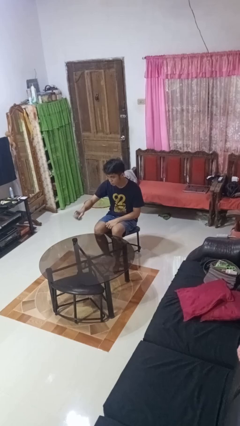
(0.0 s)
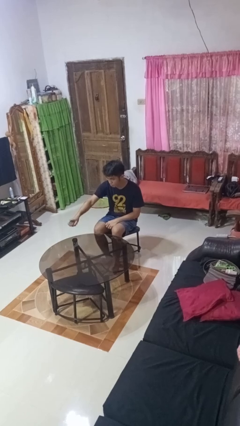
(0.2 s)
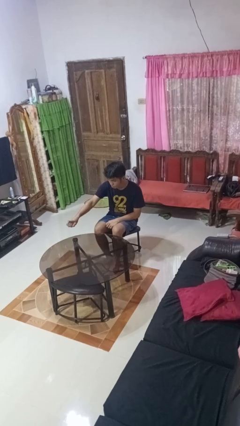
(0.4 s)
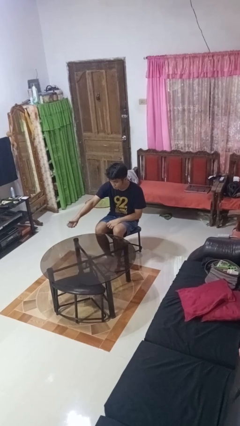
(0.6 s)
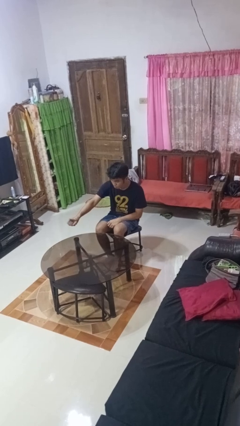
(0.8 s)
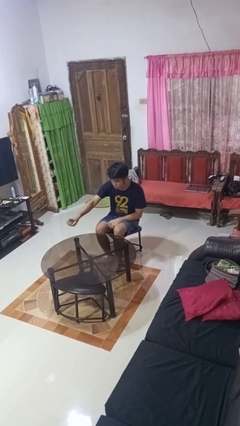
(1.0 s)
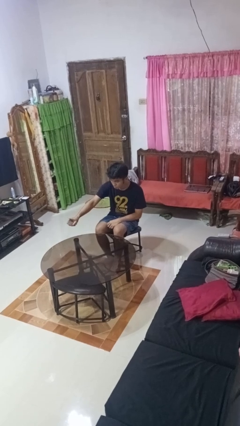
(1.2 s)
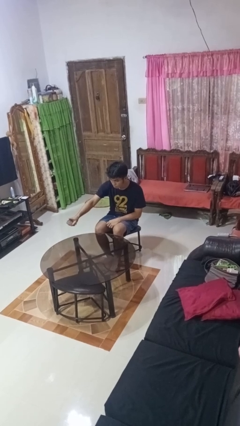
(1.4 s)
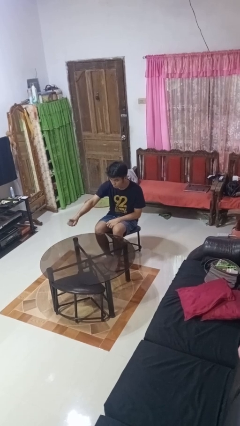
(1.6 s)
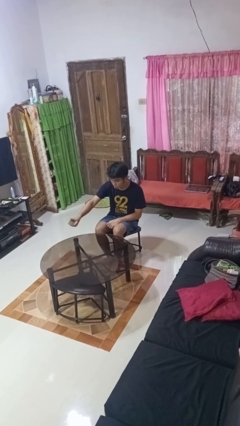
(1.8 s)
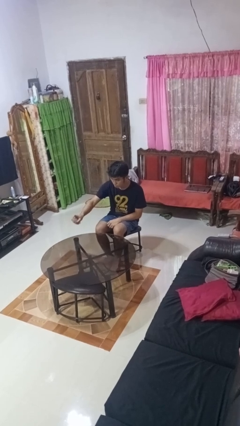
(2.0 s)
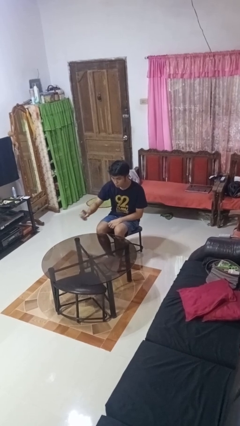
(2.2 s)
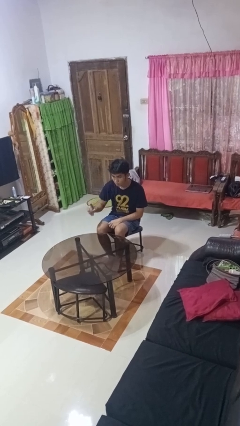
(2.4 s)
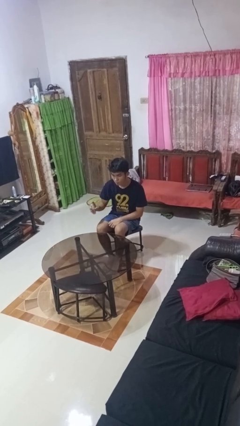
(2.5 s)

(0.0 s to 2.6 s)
person sprays from bottle

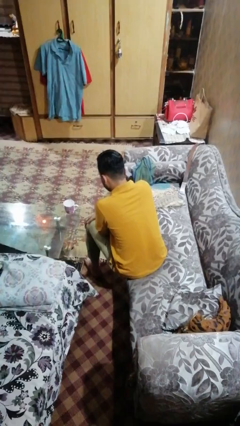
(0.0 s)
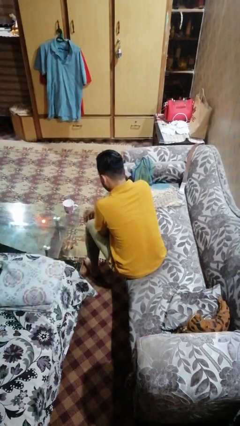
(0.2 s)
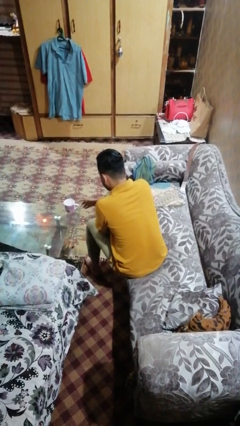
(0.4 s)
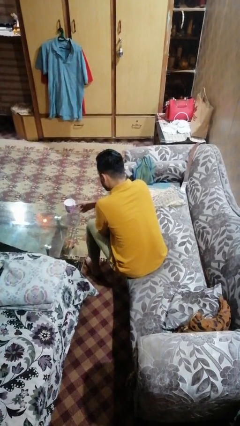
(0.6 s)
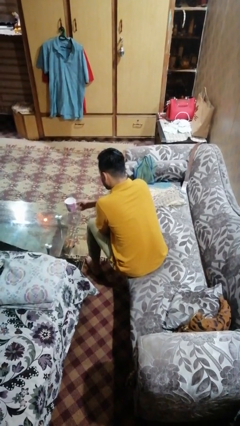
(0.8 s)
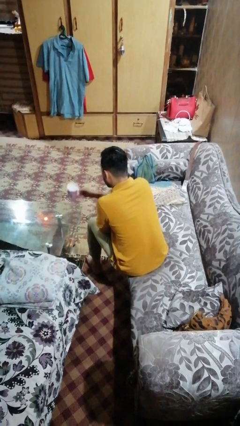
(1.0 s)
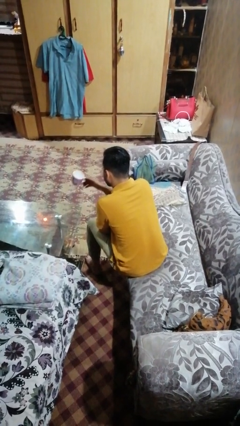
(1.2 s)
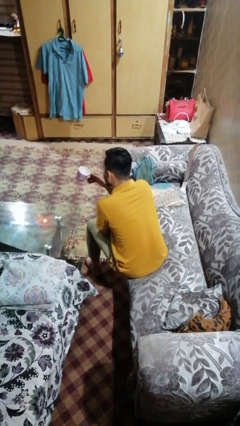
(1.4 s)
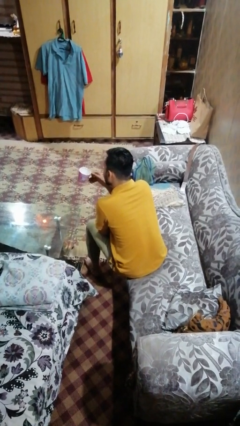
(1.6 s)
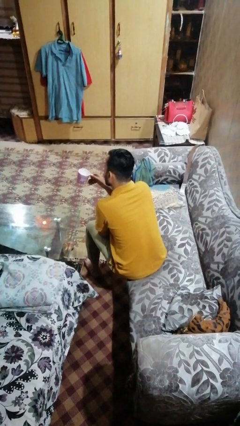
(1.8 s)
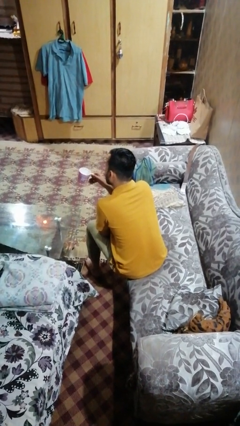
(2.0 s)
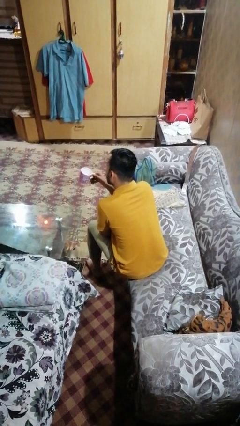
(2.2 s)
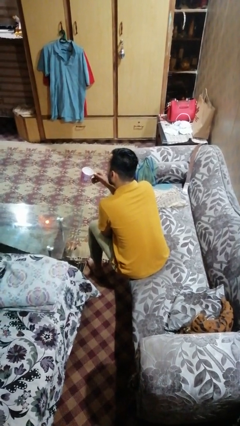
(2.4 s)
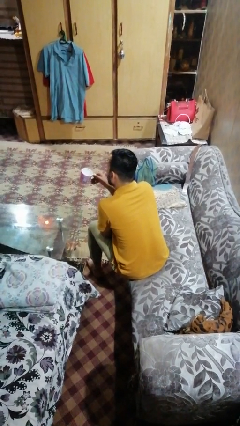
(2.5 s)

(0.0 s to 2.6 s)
person picks up object from table

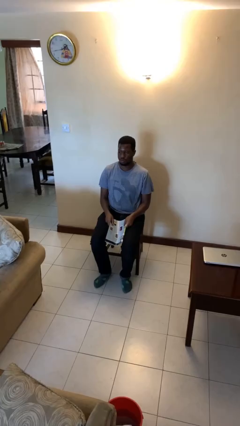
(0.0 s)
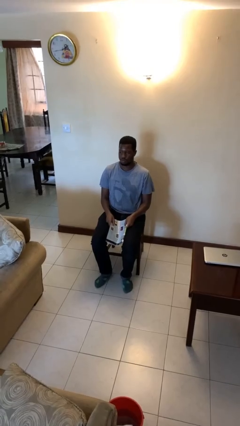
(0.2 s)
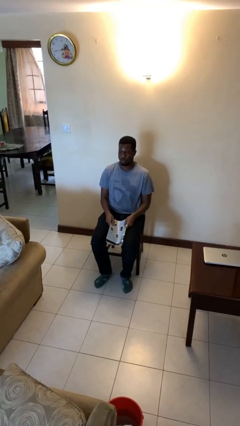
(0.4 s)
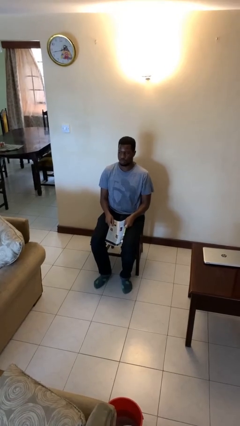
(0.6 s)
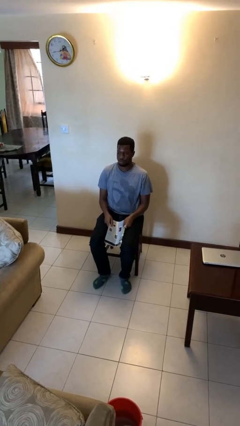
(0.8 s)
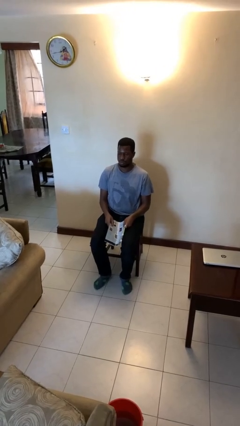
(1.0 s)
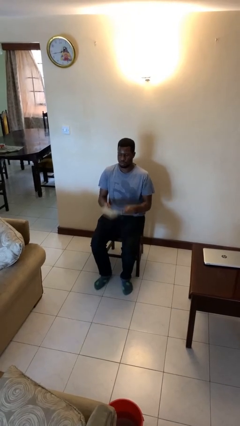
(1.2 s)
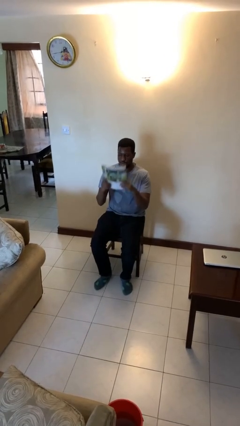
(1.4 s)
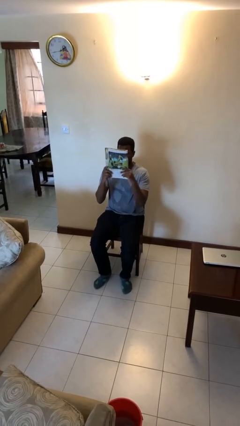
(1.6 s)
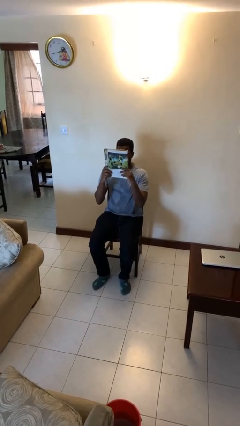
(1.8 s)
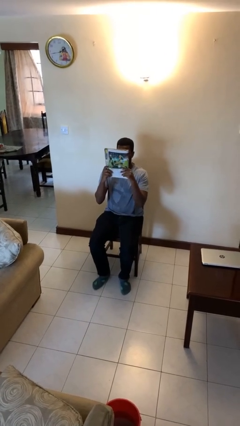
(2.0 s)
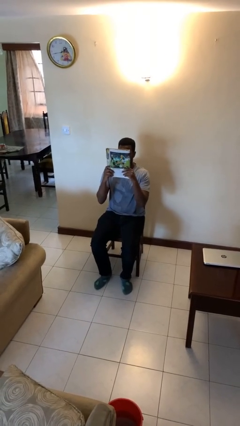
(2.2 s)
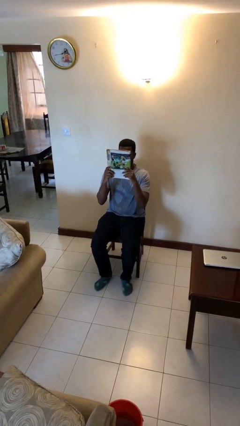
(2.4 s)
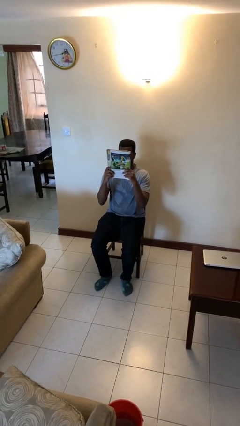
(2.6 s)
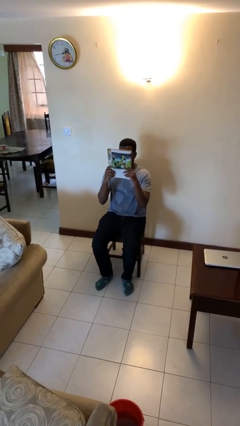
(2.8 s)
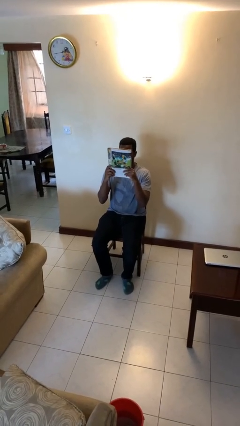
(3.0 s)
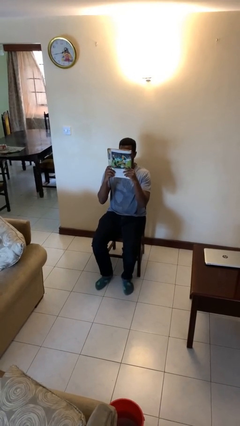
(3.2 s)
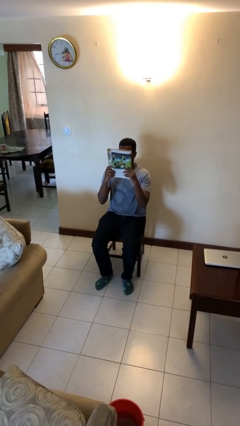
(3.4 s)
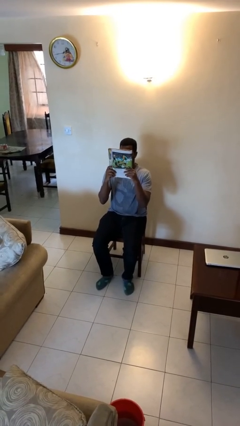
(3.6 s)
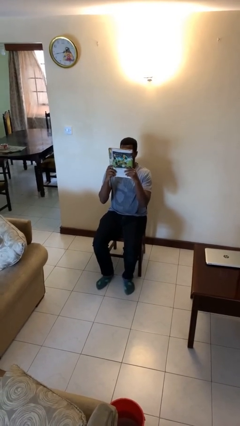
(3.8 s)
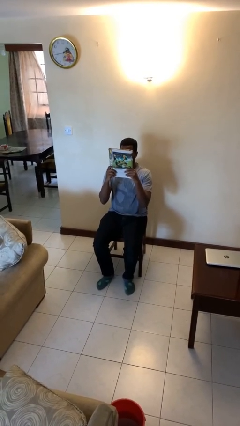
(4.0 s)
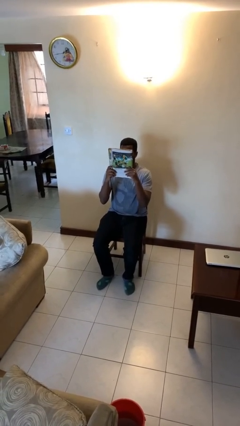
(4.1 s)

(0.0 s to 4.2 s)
person reads document

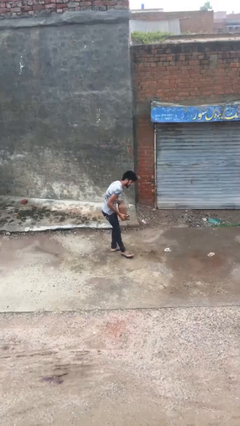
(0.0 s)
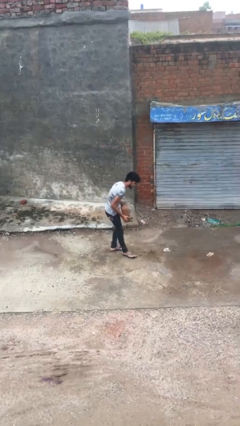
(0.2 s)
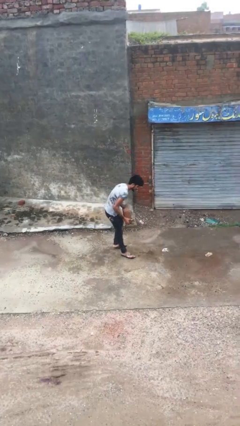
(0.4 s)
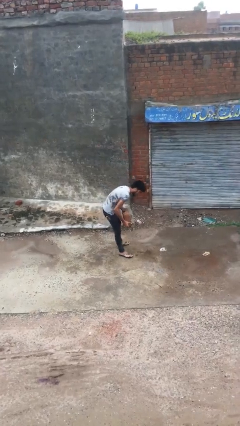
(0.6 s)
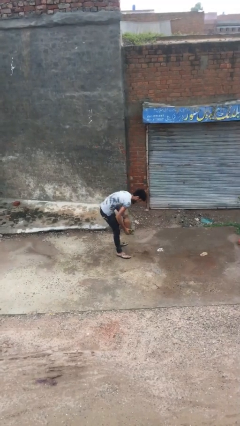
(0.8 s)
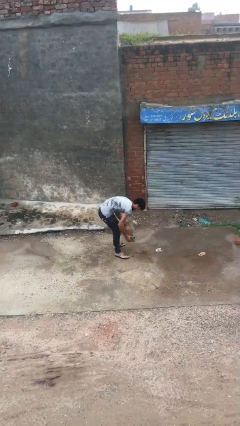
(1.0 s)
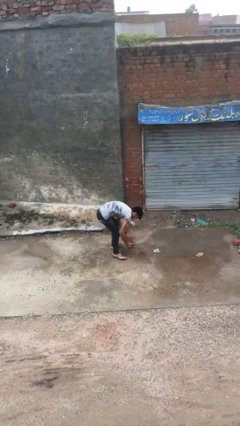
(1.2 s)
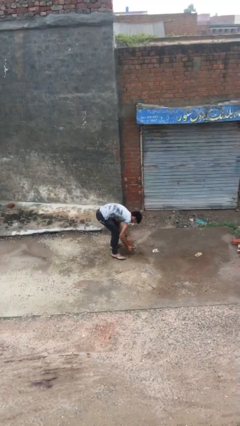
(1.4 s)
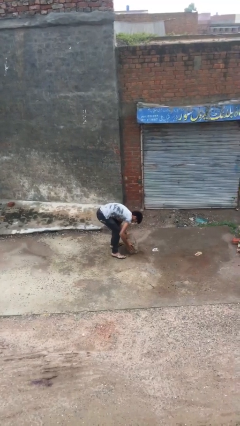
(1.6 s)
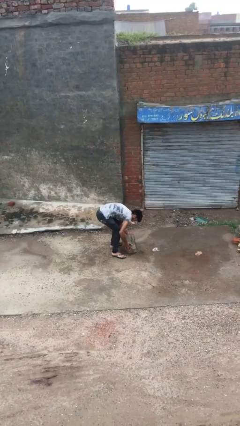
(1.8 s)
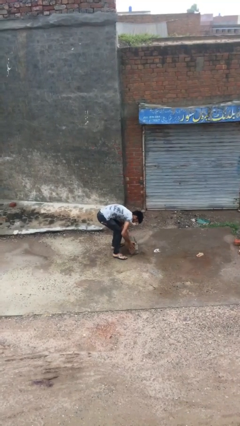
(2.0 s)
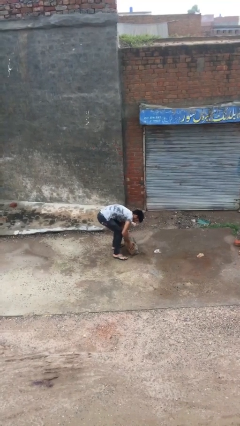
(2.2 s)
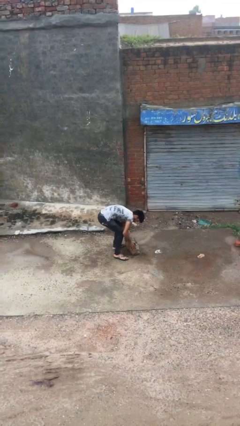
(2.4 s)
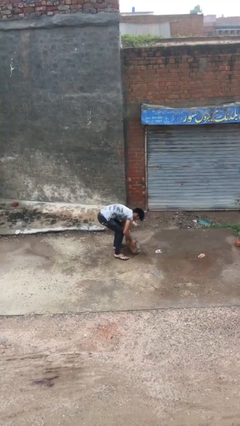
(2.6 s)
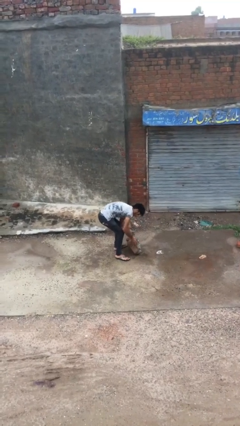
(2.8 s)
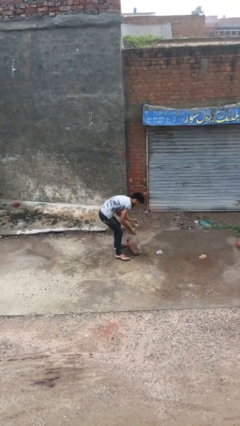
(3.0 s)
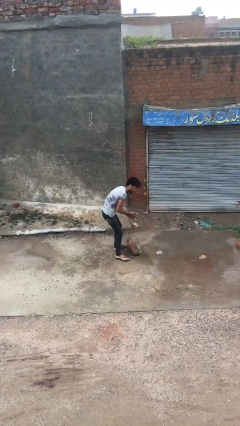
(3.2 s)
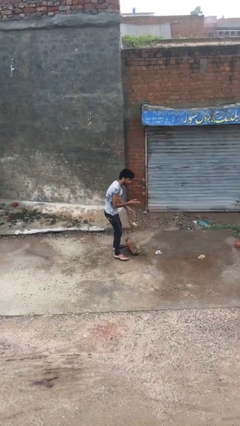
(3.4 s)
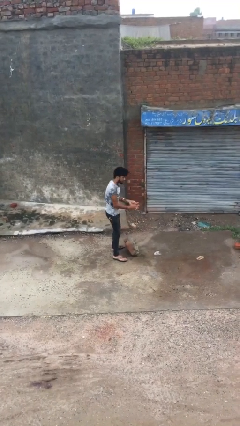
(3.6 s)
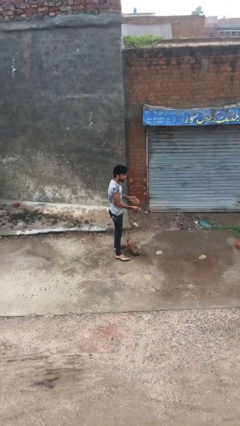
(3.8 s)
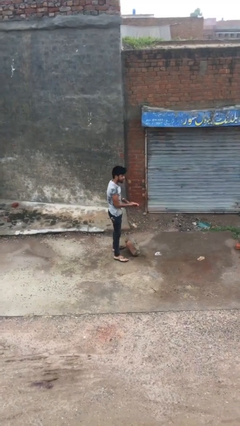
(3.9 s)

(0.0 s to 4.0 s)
person puts down object on floor

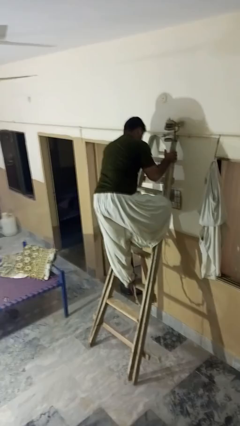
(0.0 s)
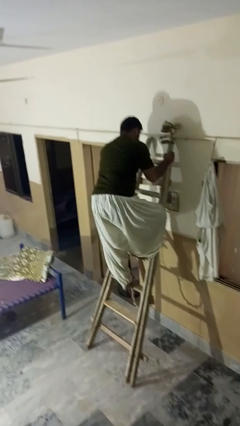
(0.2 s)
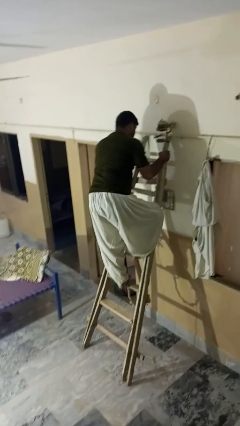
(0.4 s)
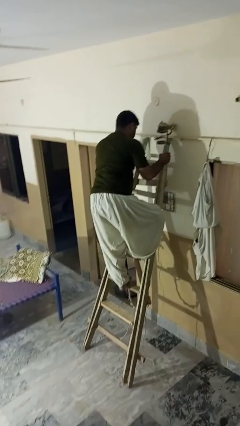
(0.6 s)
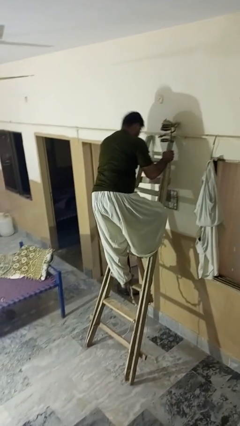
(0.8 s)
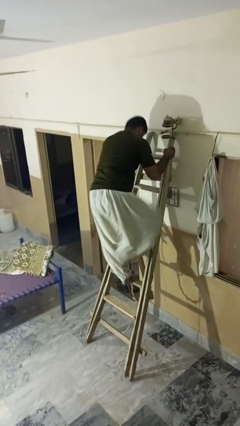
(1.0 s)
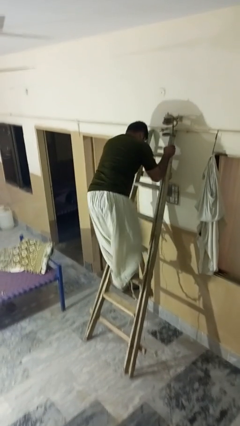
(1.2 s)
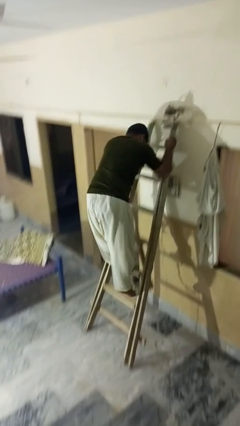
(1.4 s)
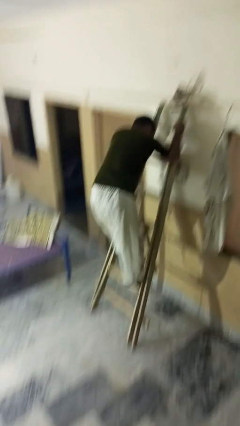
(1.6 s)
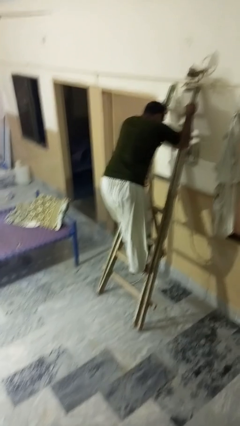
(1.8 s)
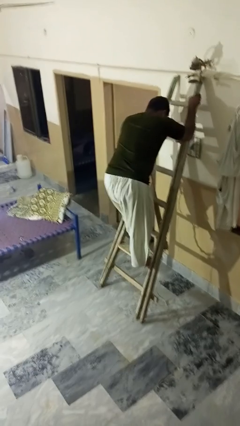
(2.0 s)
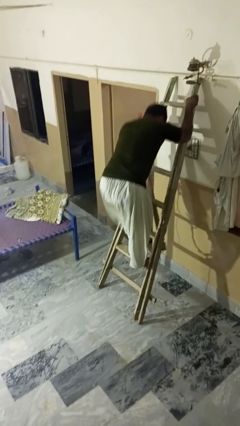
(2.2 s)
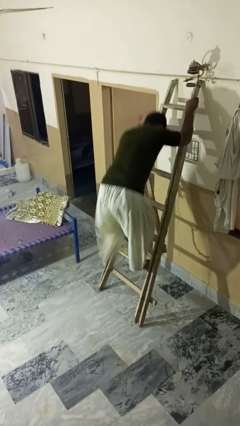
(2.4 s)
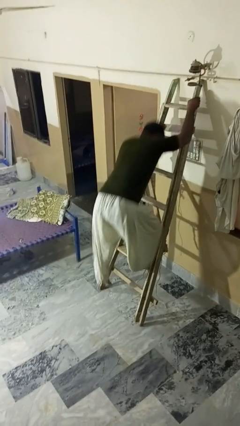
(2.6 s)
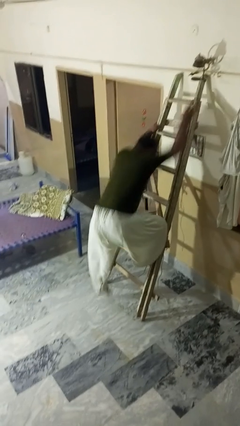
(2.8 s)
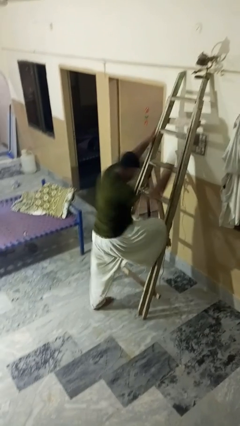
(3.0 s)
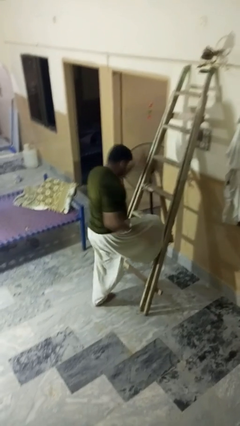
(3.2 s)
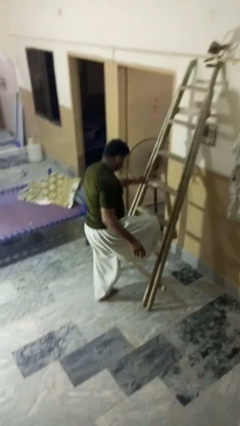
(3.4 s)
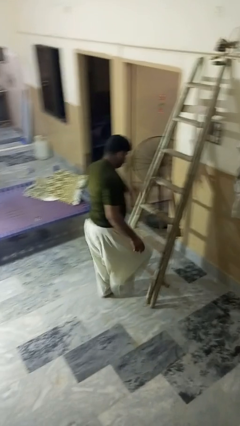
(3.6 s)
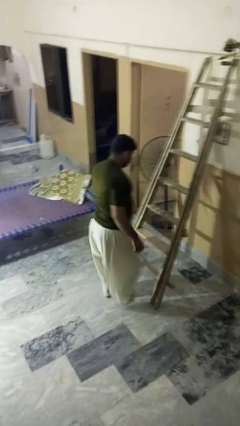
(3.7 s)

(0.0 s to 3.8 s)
person climbs down ladder

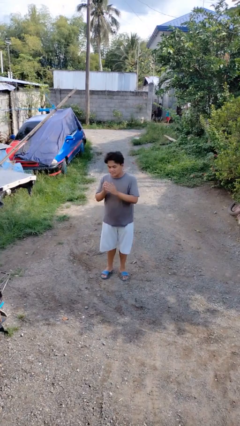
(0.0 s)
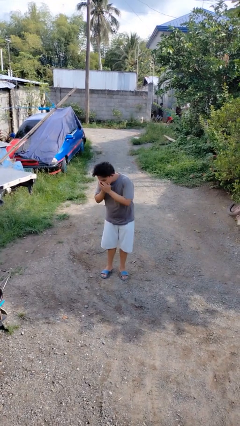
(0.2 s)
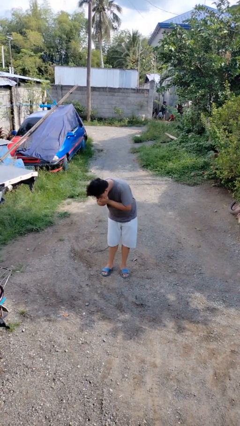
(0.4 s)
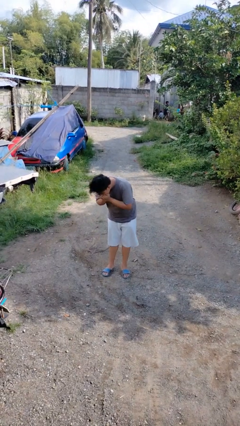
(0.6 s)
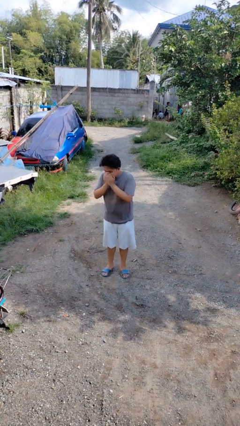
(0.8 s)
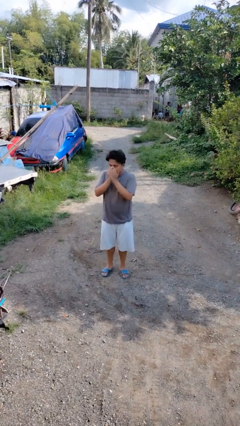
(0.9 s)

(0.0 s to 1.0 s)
person sneezes into hand
